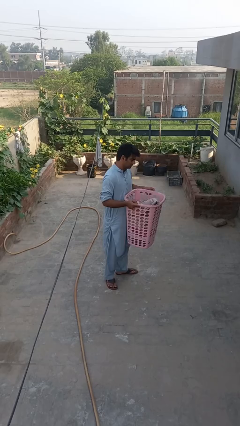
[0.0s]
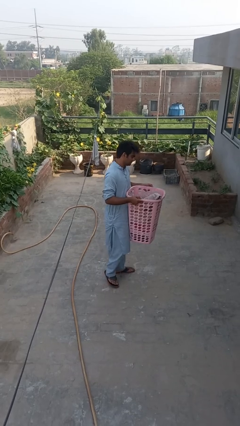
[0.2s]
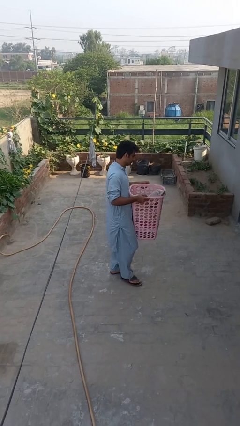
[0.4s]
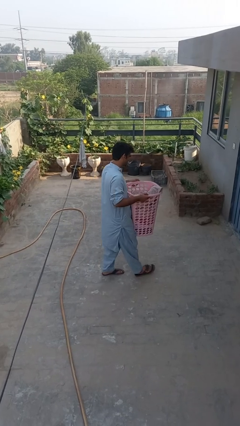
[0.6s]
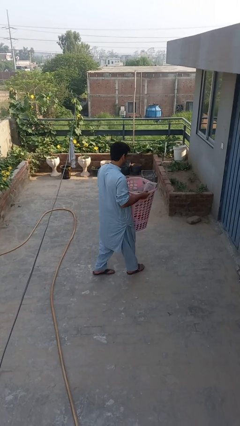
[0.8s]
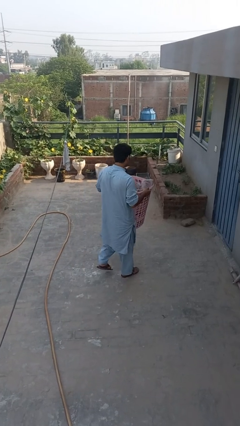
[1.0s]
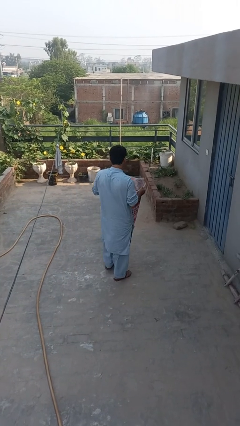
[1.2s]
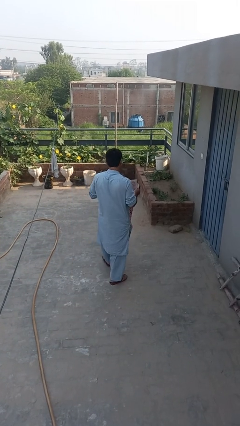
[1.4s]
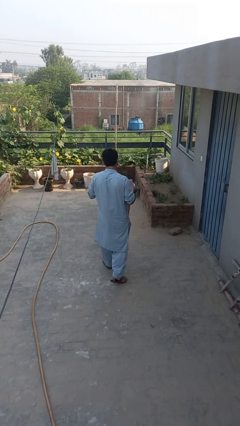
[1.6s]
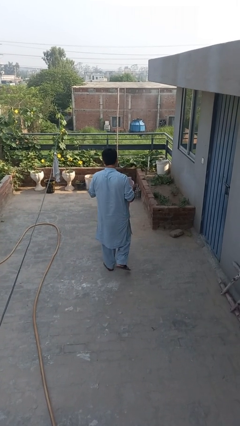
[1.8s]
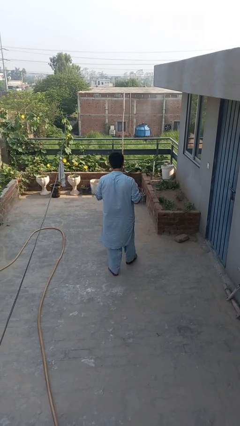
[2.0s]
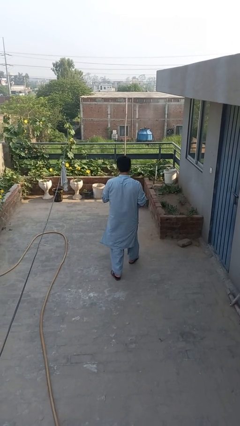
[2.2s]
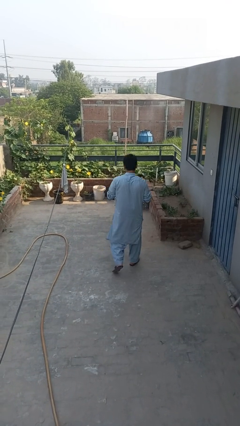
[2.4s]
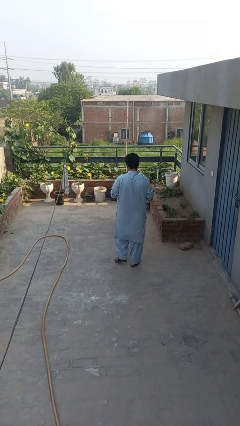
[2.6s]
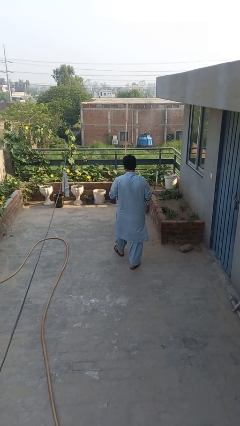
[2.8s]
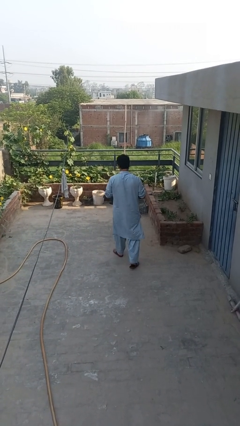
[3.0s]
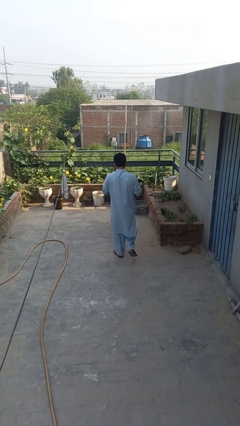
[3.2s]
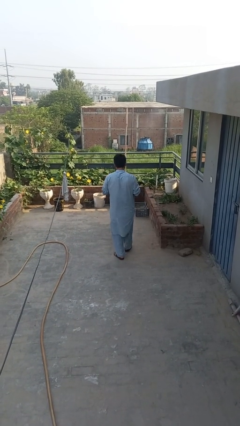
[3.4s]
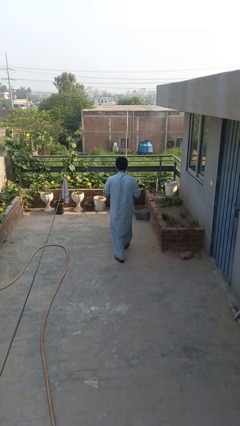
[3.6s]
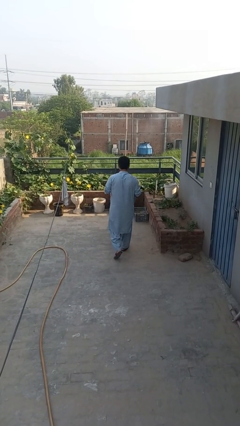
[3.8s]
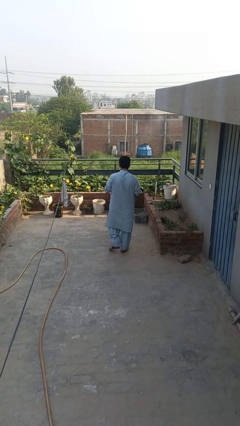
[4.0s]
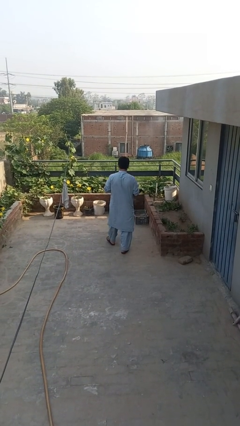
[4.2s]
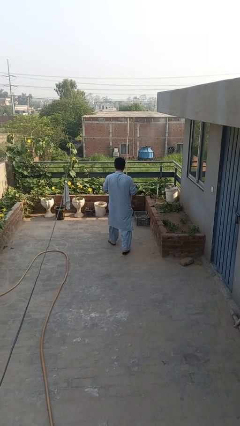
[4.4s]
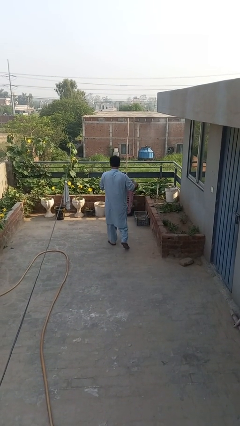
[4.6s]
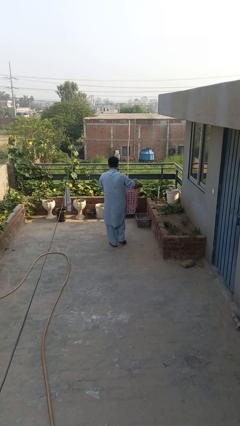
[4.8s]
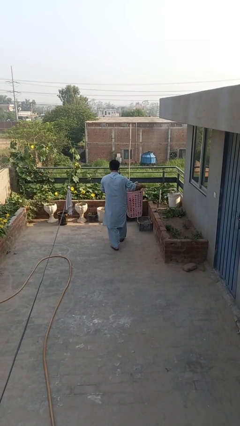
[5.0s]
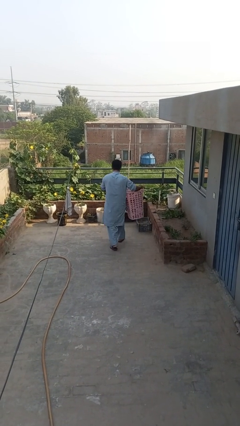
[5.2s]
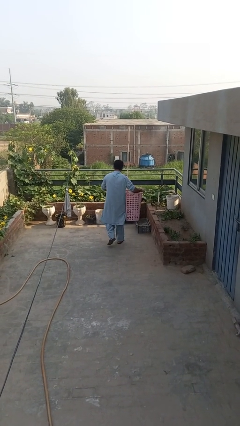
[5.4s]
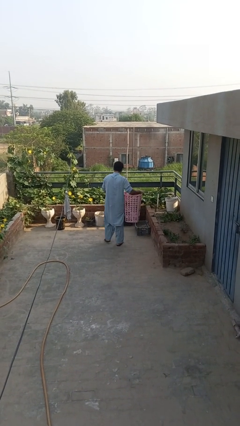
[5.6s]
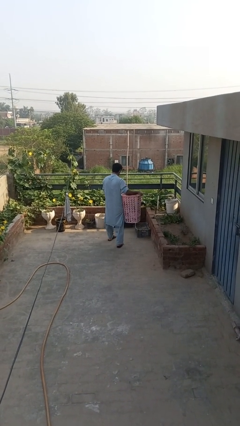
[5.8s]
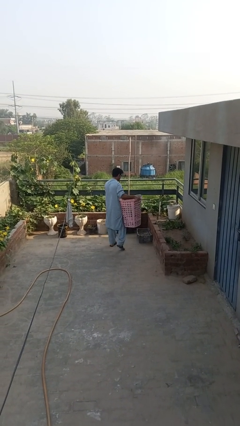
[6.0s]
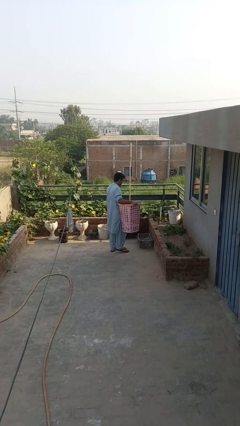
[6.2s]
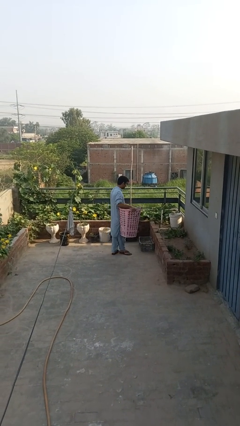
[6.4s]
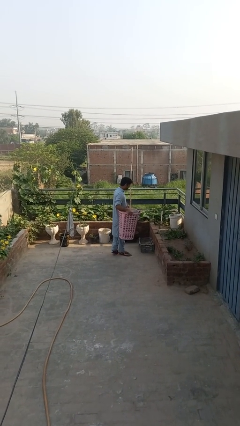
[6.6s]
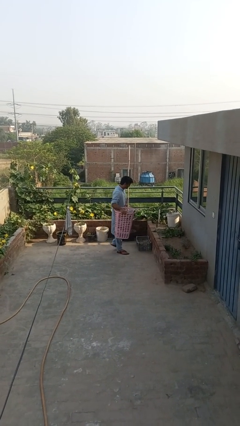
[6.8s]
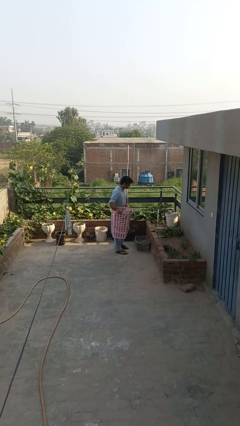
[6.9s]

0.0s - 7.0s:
person carries laundry basket

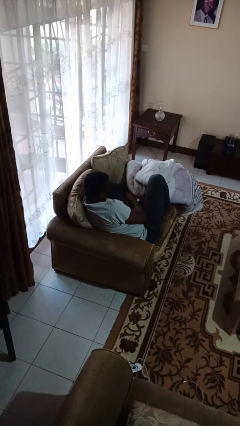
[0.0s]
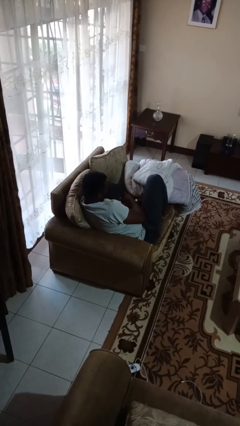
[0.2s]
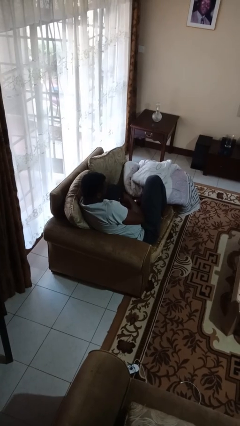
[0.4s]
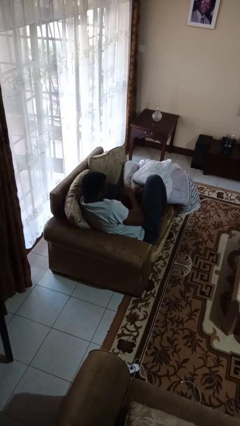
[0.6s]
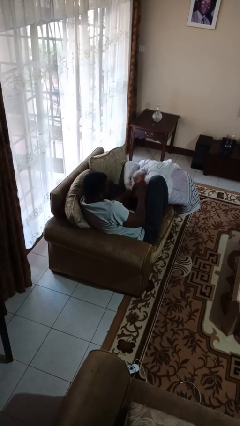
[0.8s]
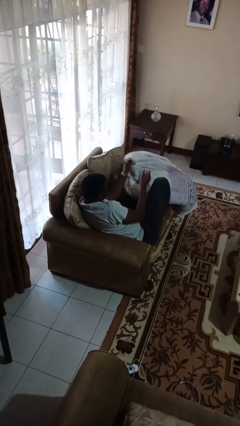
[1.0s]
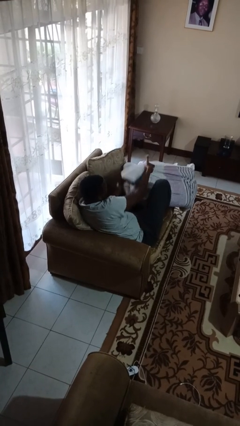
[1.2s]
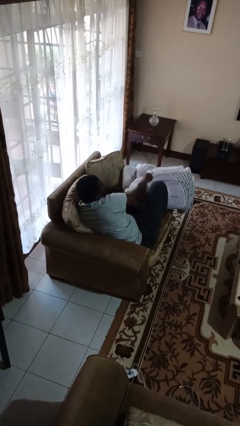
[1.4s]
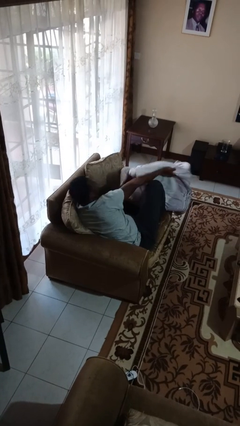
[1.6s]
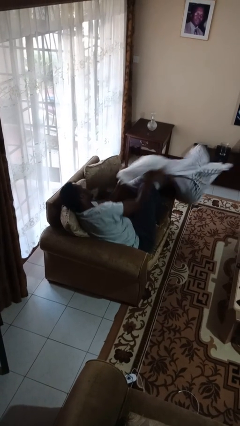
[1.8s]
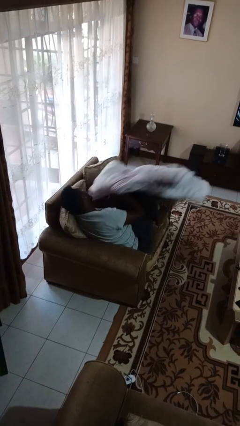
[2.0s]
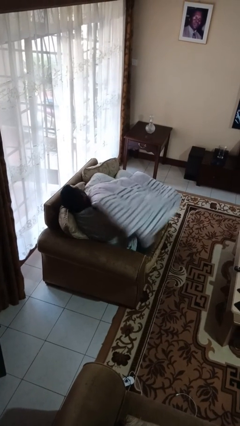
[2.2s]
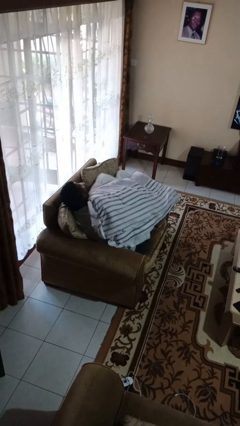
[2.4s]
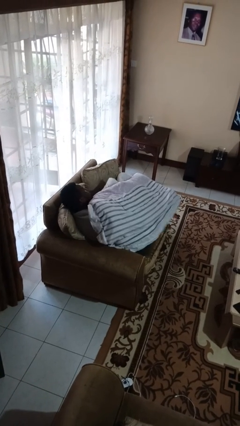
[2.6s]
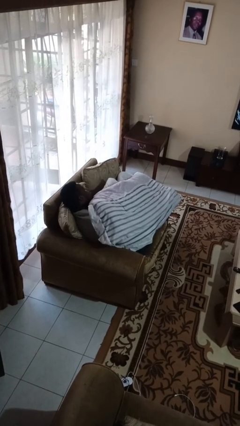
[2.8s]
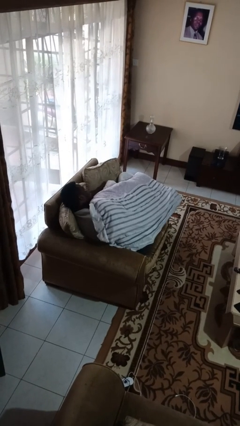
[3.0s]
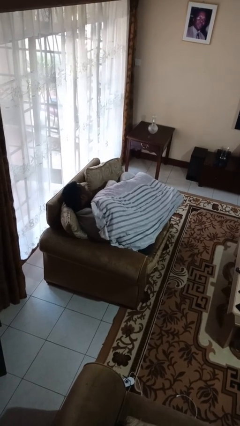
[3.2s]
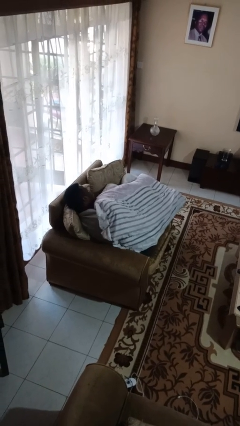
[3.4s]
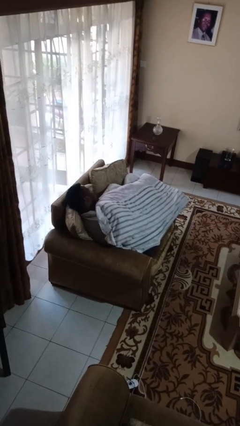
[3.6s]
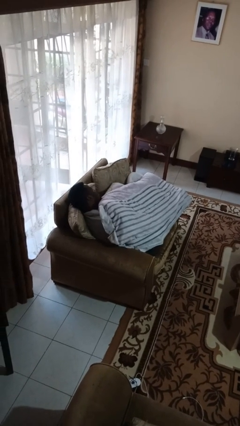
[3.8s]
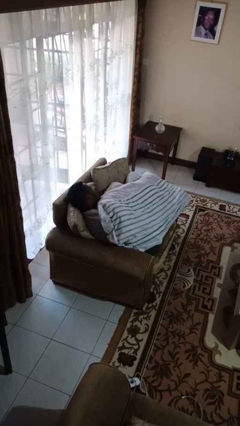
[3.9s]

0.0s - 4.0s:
person covers with blanket

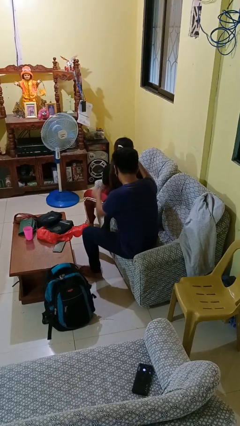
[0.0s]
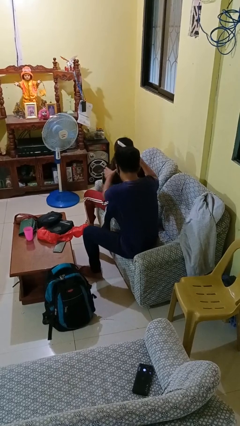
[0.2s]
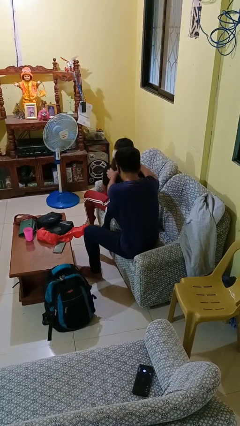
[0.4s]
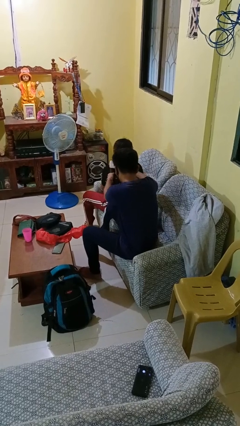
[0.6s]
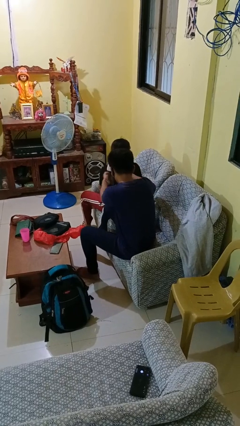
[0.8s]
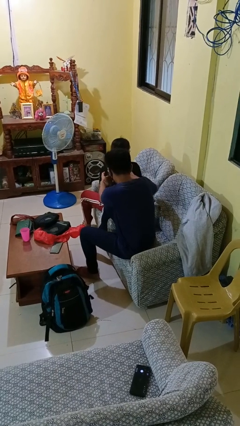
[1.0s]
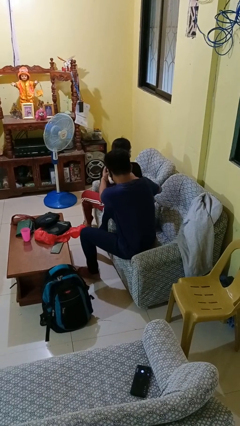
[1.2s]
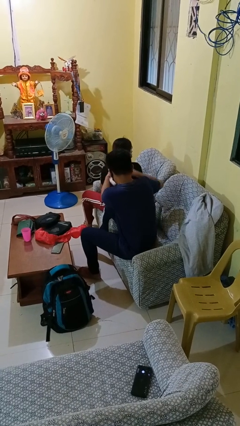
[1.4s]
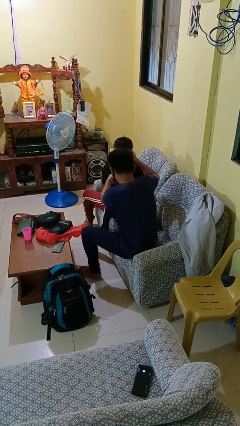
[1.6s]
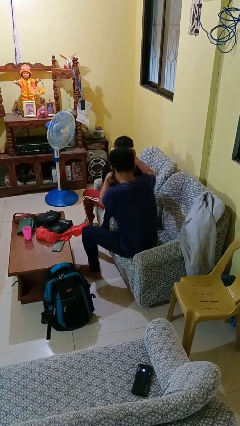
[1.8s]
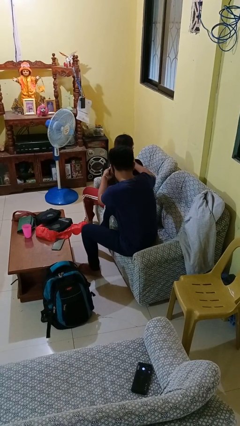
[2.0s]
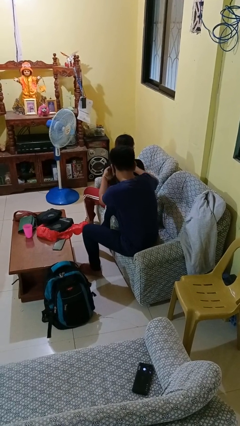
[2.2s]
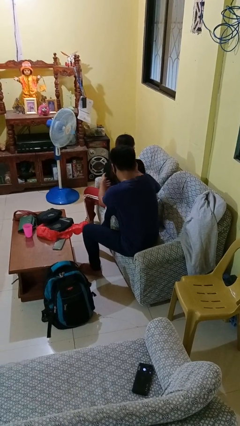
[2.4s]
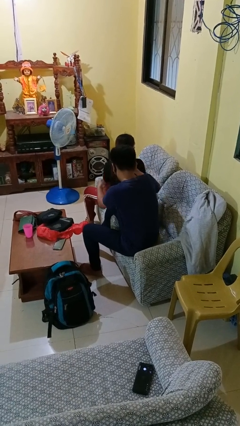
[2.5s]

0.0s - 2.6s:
person brushes hair of person

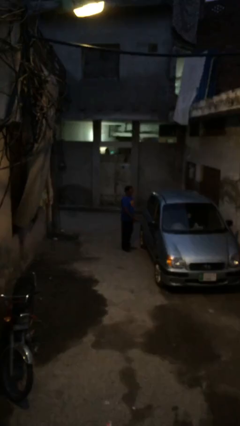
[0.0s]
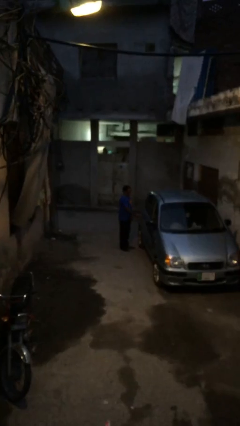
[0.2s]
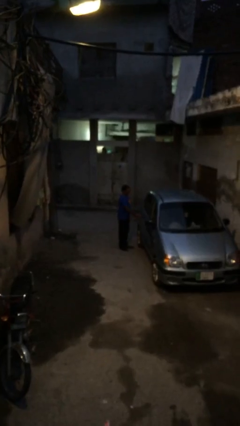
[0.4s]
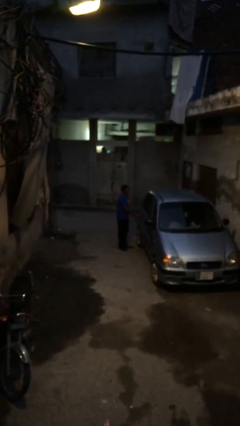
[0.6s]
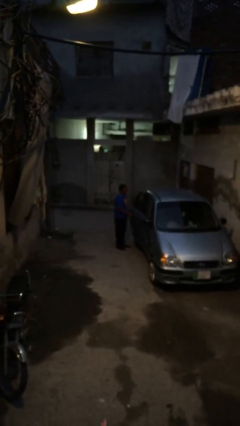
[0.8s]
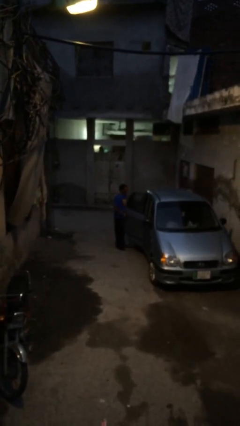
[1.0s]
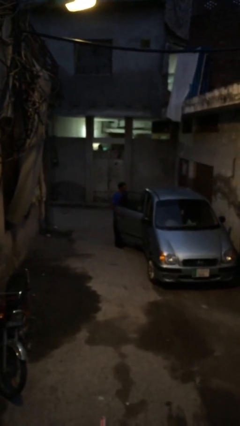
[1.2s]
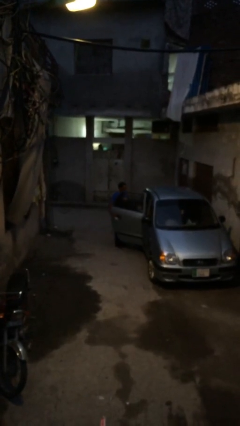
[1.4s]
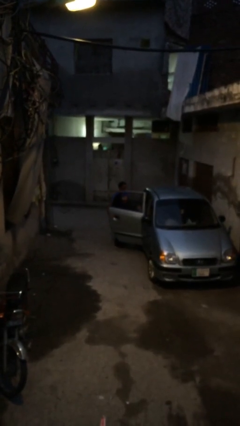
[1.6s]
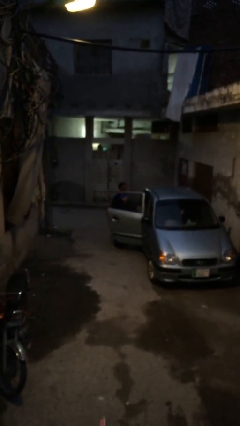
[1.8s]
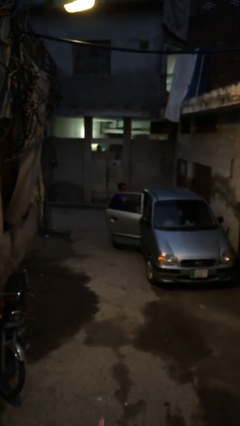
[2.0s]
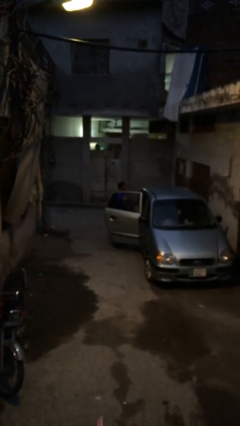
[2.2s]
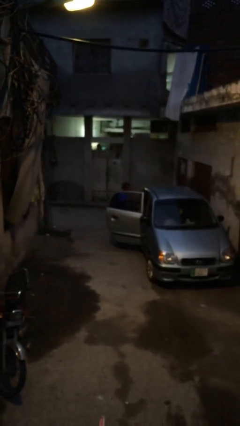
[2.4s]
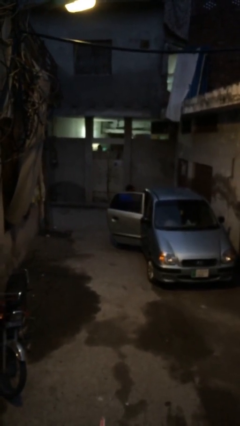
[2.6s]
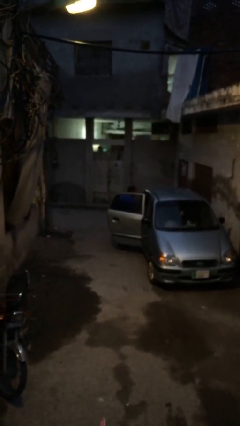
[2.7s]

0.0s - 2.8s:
person opens car door

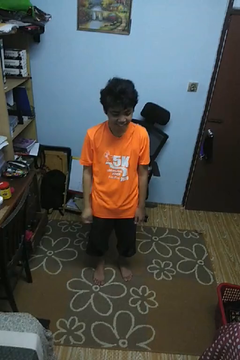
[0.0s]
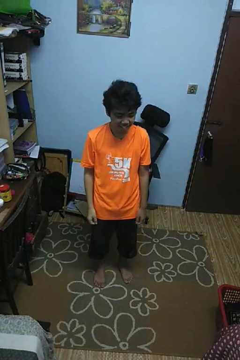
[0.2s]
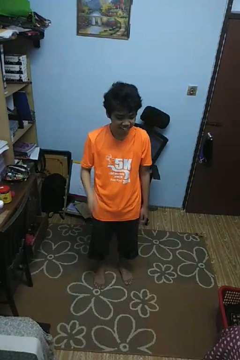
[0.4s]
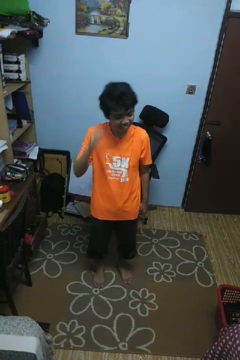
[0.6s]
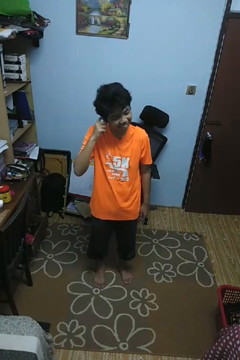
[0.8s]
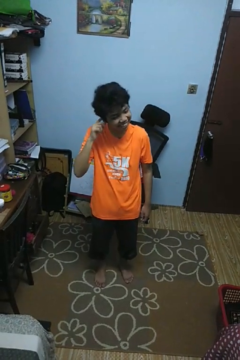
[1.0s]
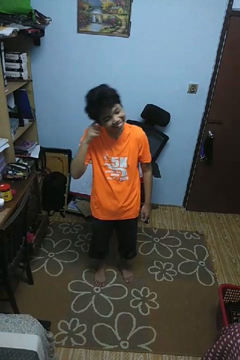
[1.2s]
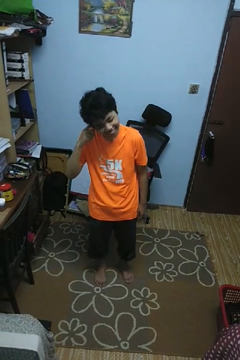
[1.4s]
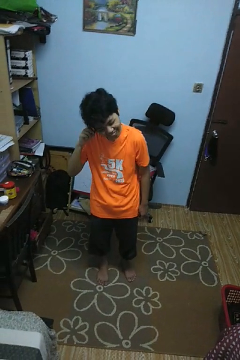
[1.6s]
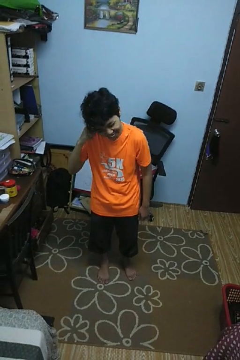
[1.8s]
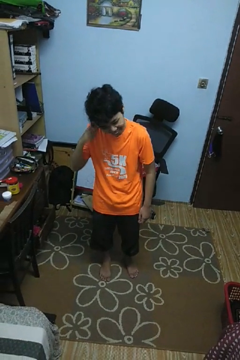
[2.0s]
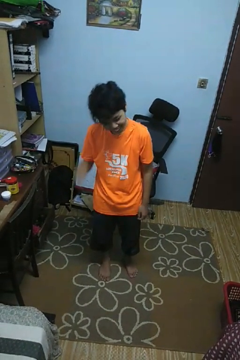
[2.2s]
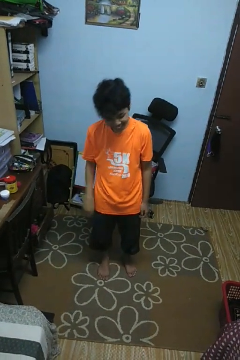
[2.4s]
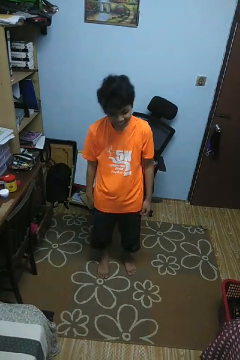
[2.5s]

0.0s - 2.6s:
person puts fingers in ear
